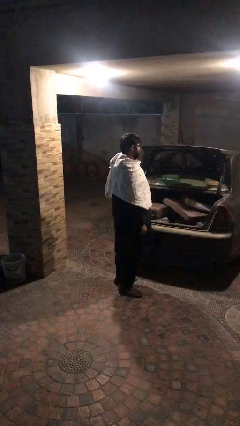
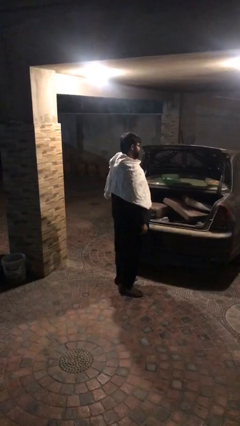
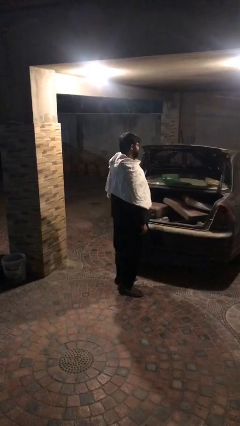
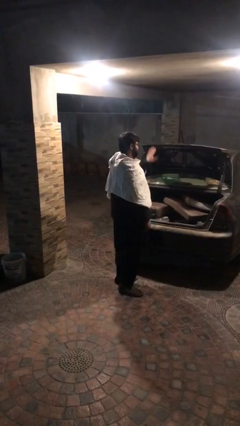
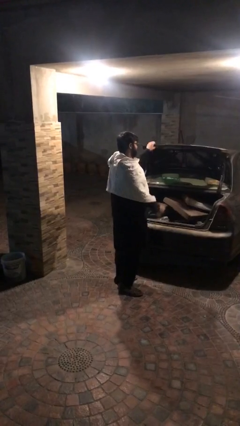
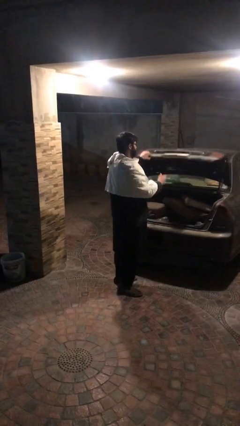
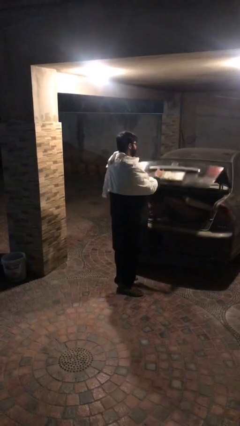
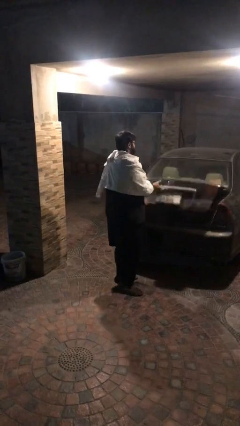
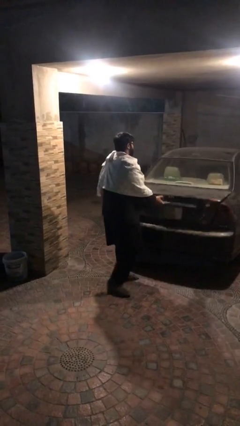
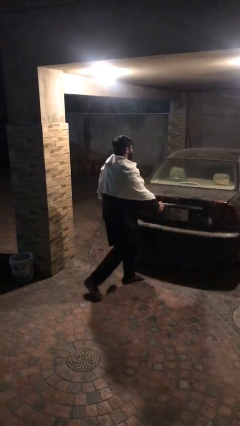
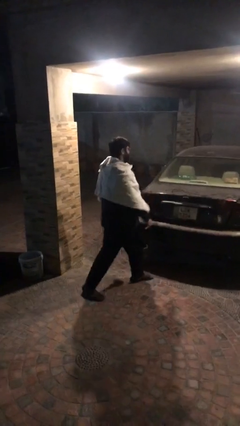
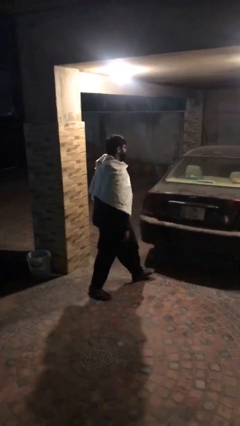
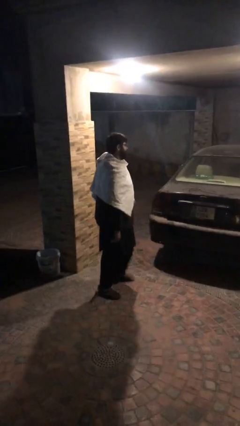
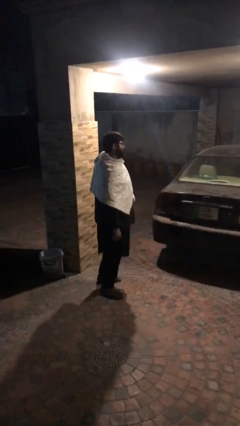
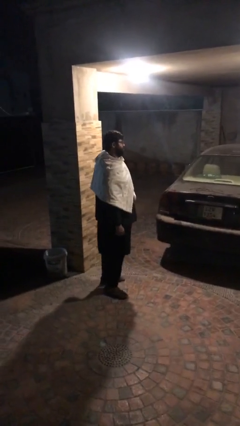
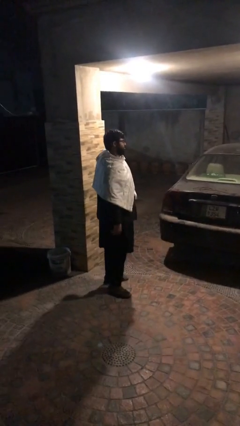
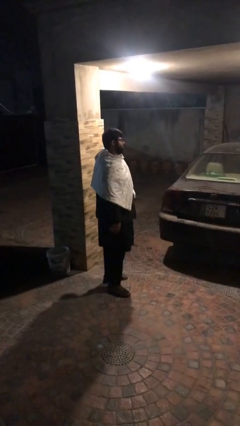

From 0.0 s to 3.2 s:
person closes car trunk

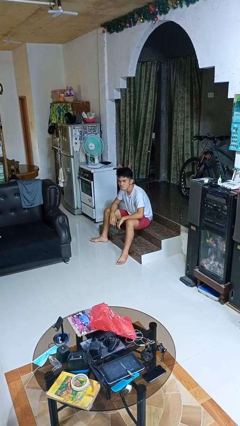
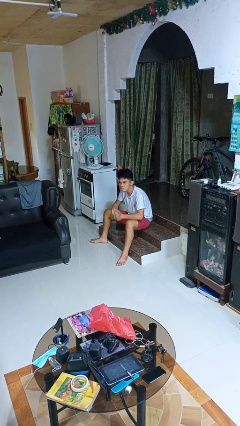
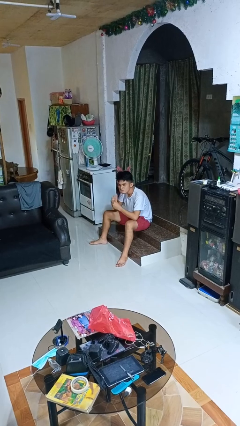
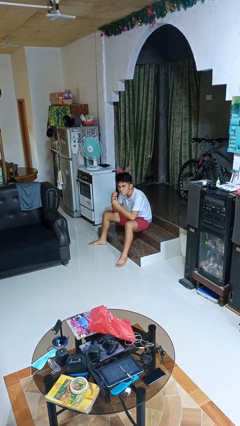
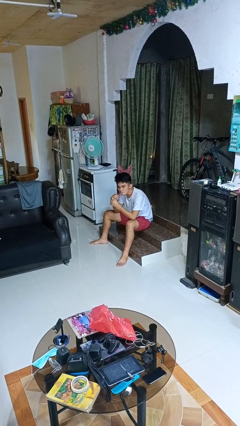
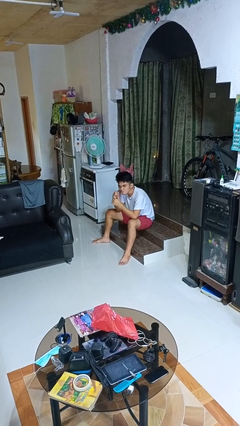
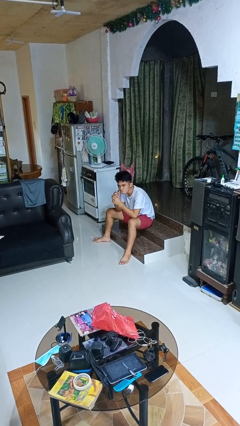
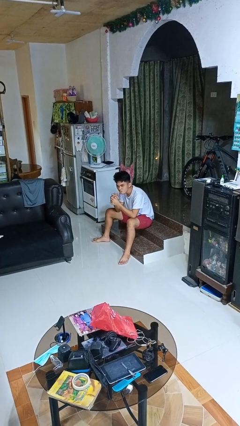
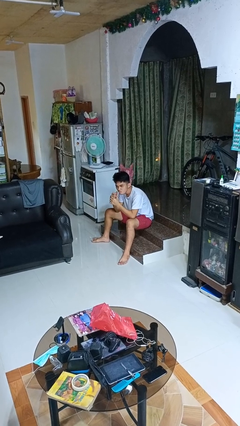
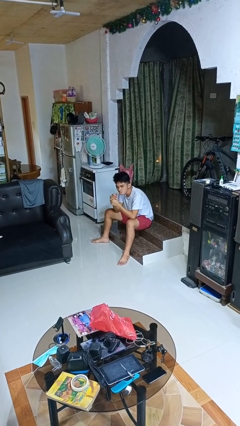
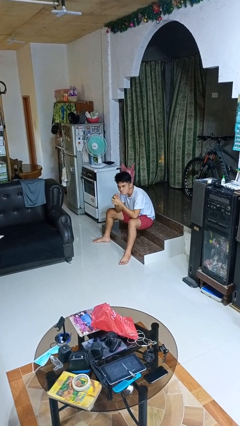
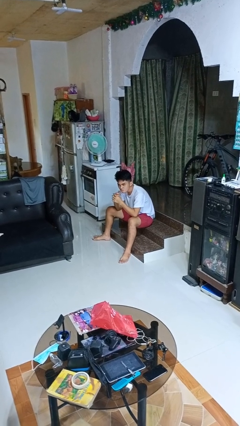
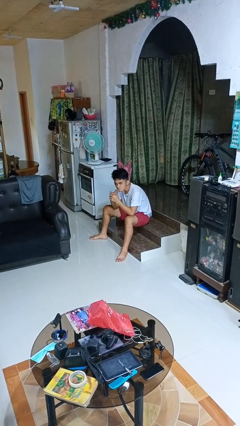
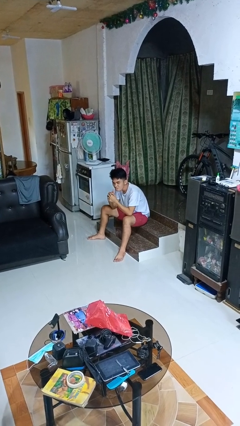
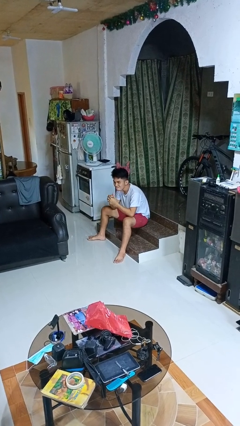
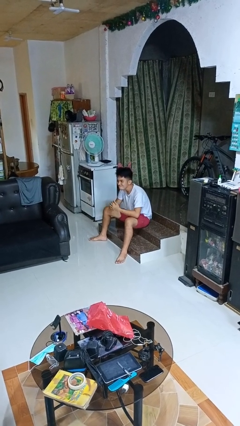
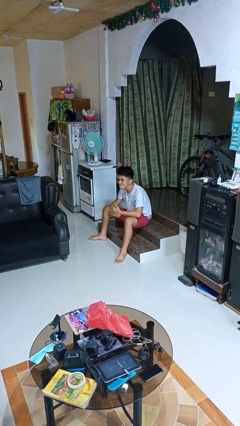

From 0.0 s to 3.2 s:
person cracks knuckles

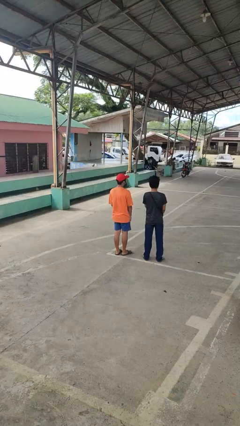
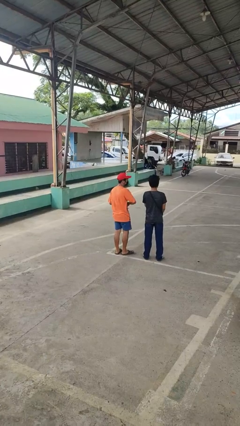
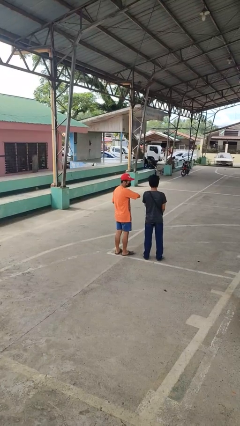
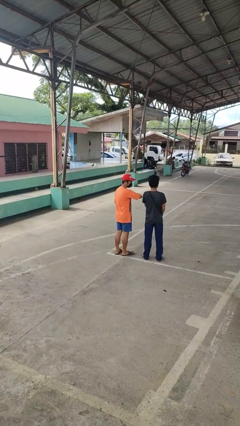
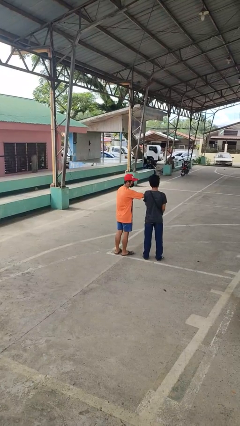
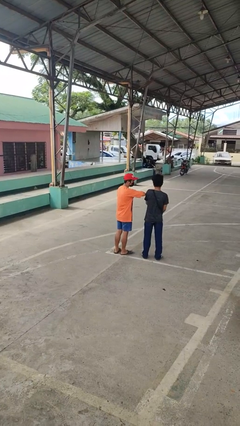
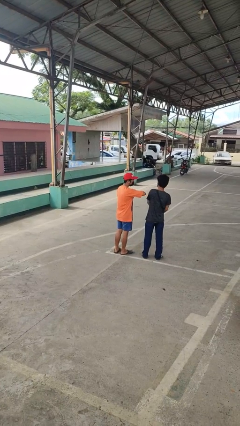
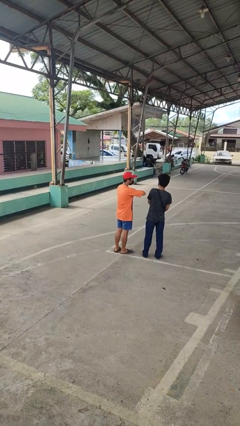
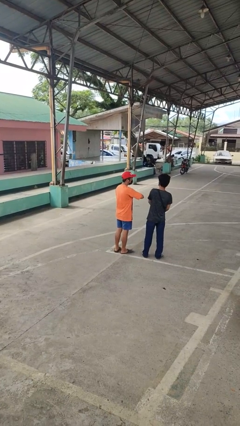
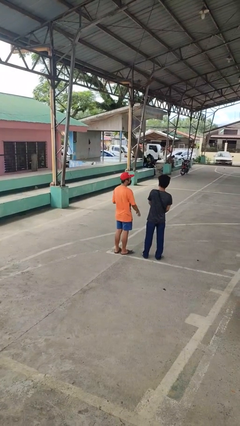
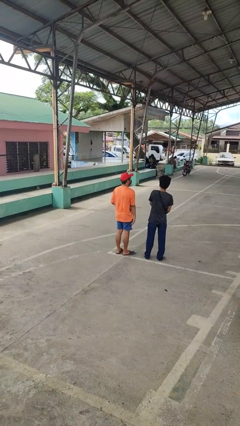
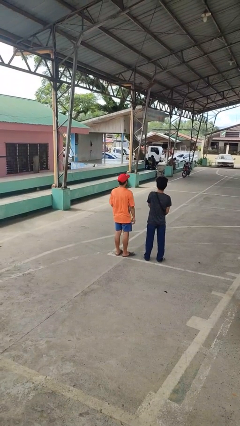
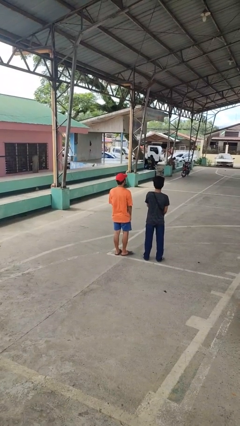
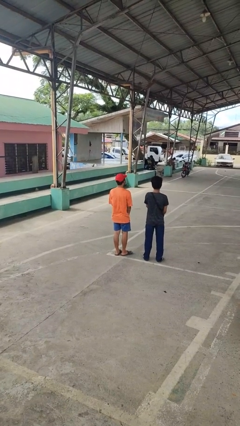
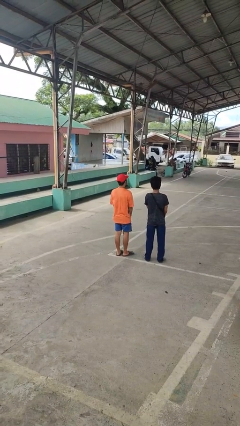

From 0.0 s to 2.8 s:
person nudges person with elbow

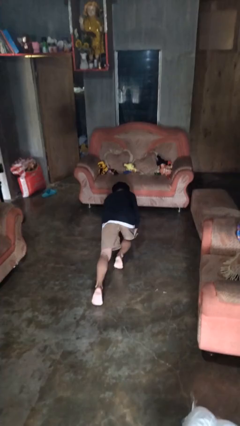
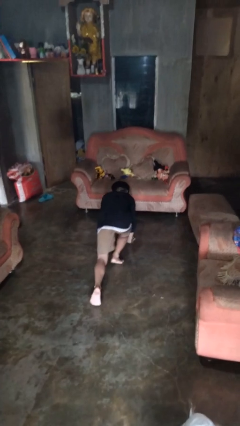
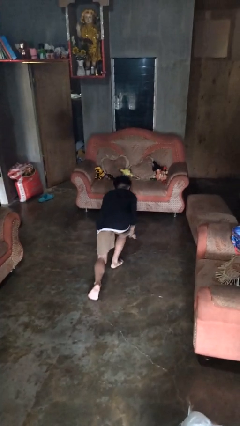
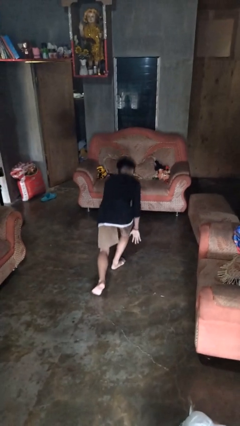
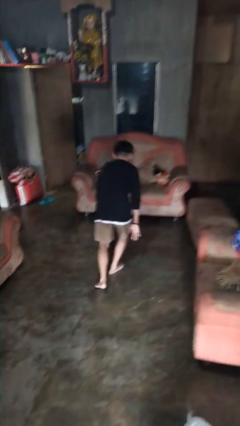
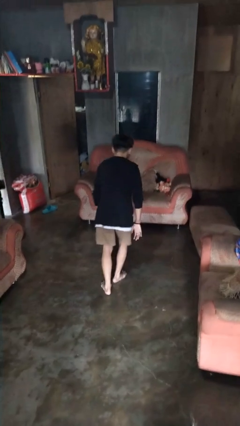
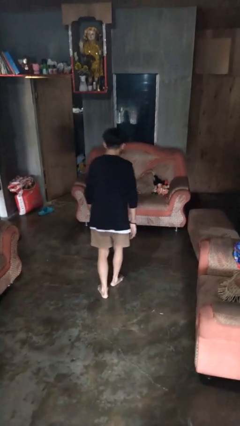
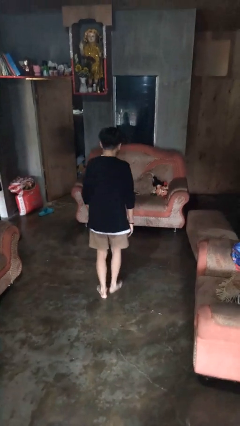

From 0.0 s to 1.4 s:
person stands up from floor

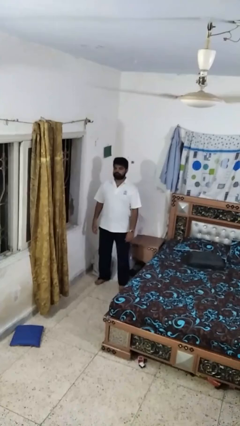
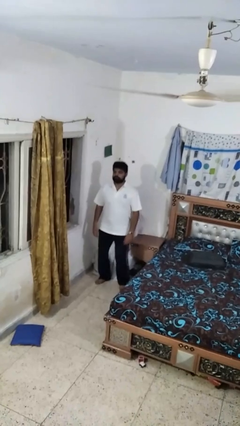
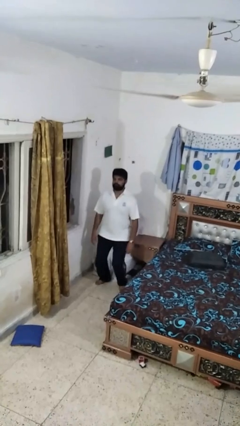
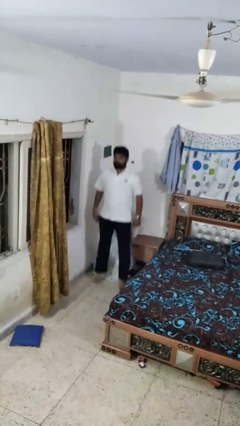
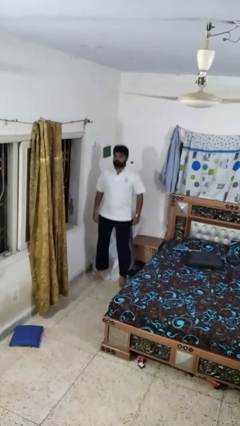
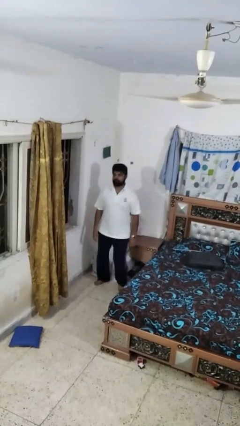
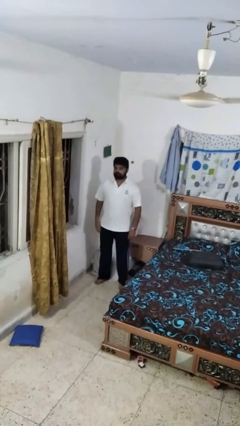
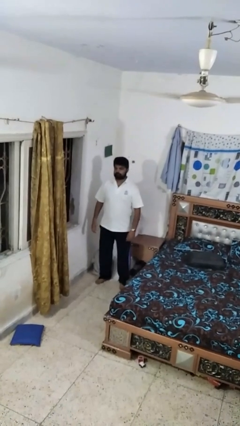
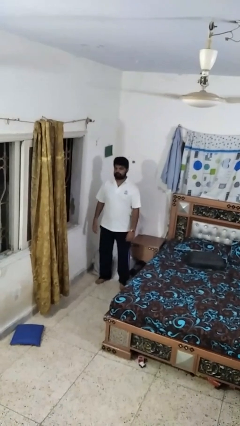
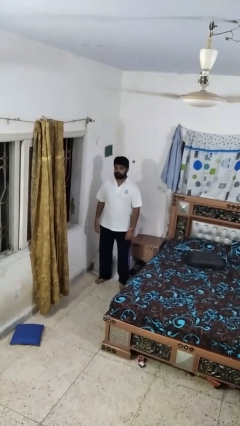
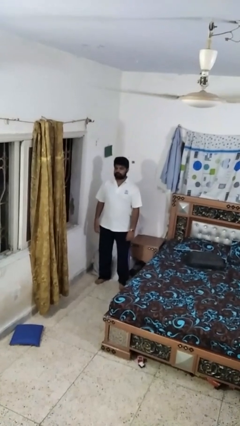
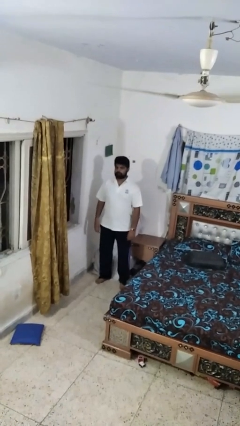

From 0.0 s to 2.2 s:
person jumps

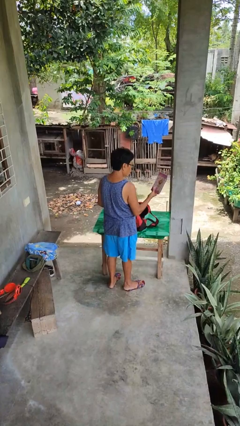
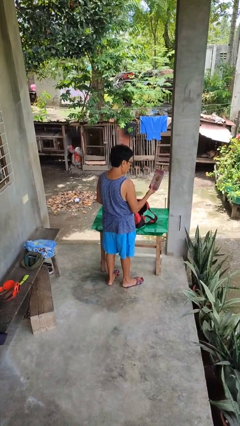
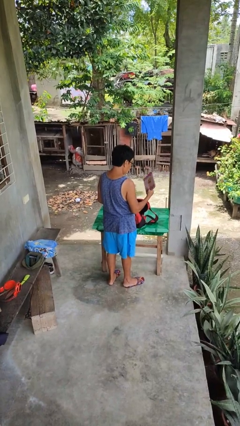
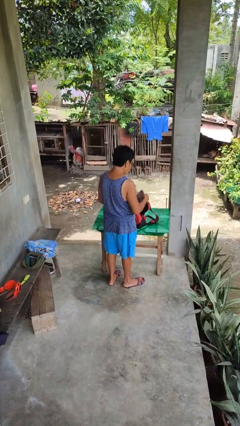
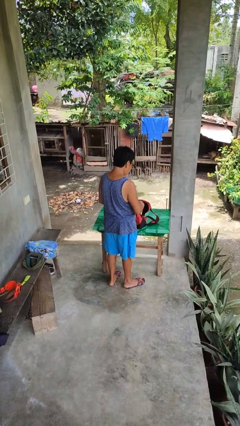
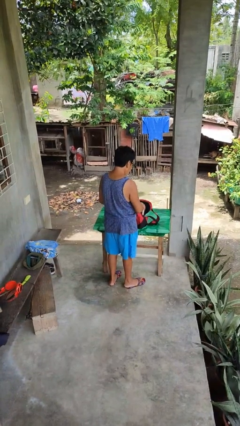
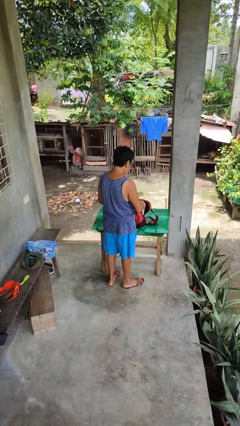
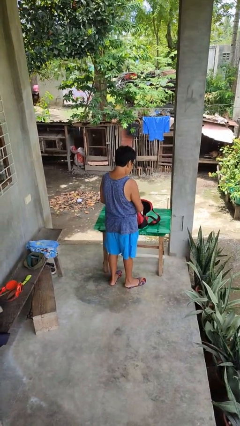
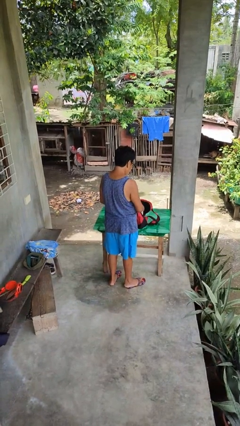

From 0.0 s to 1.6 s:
person puts object into backpack

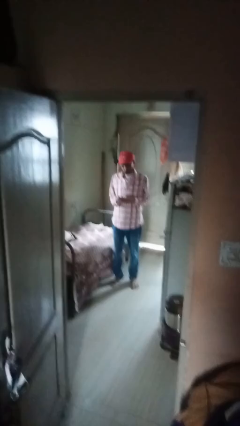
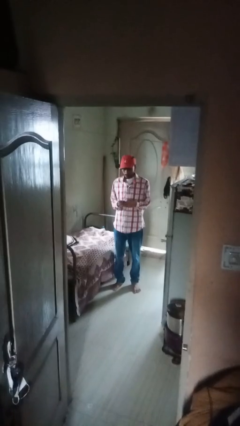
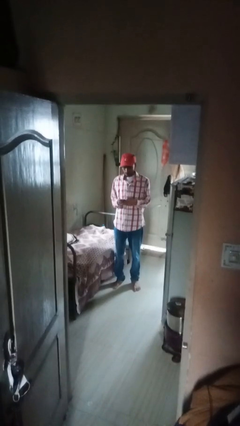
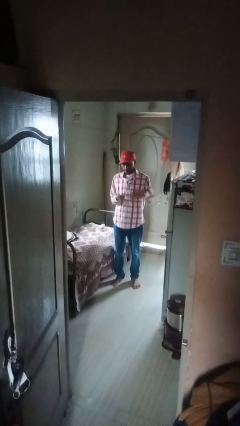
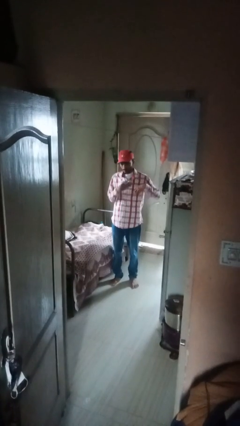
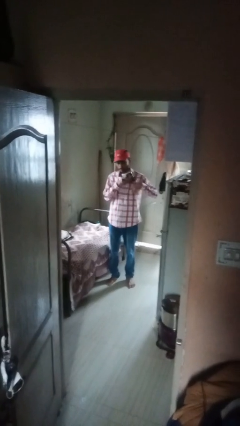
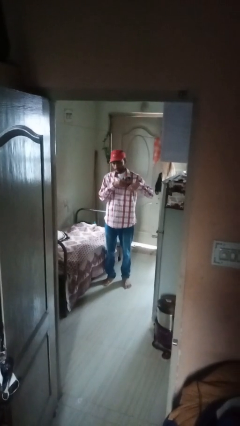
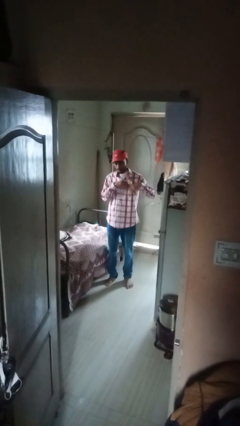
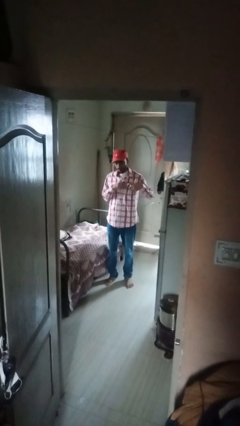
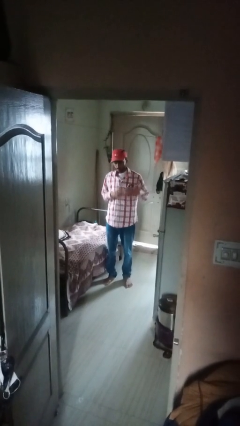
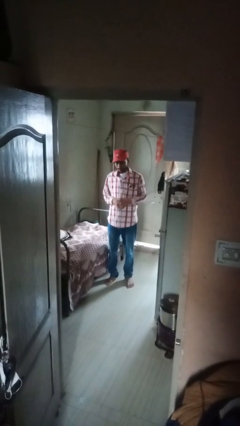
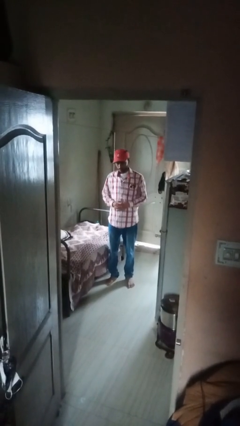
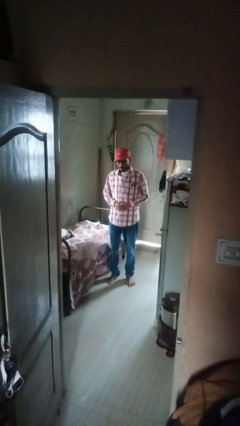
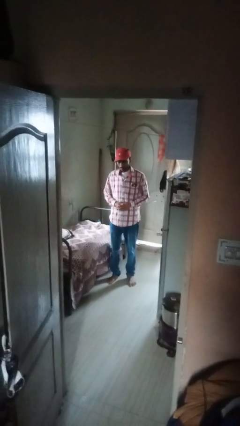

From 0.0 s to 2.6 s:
person puts phone into pocket

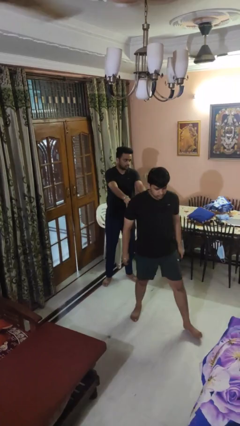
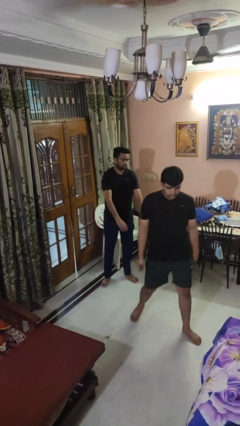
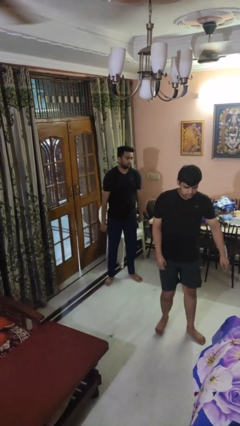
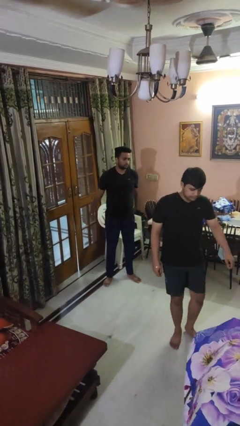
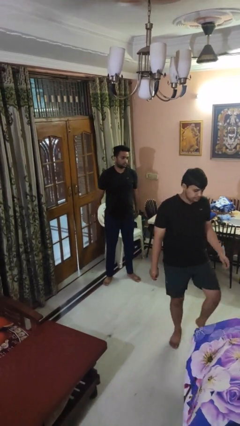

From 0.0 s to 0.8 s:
person shoves person
